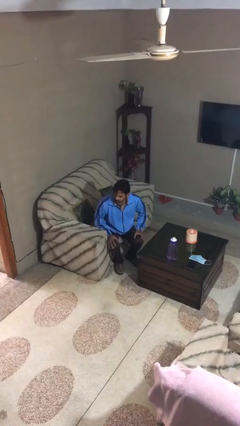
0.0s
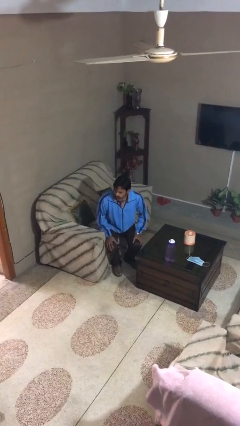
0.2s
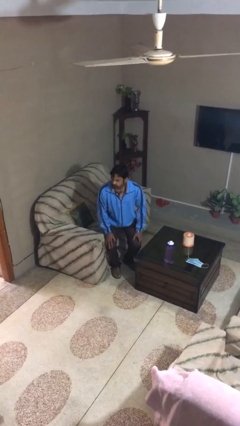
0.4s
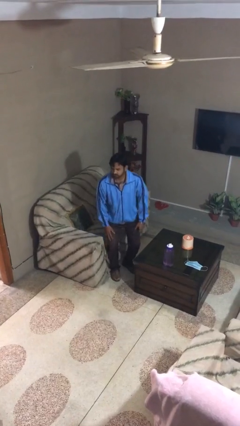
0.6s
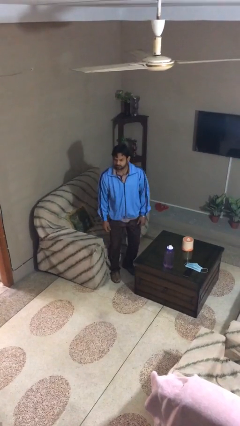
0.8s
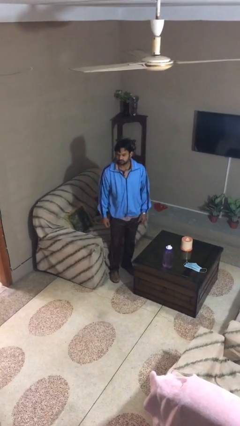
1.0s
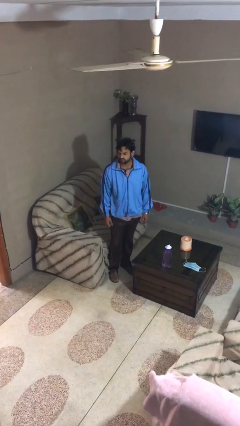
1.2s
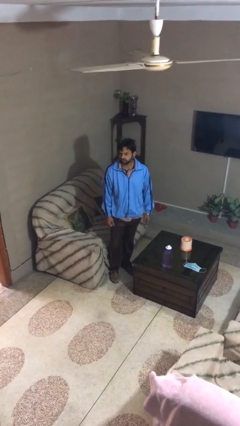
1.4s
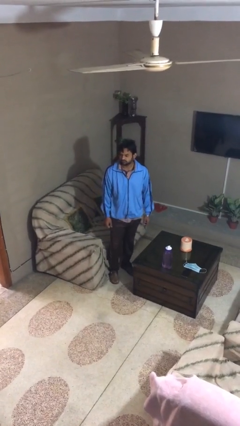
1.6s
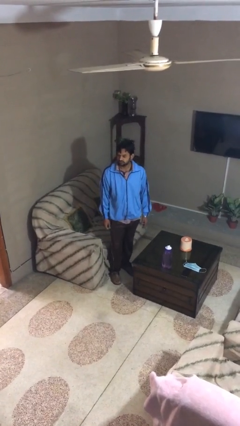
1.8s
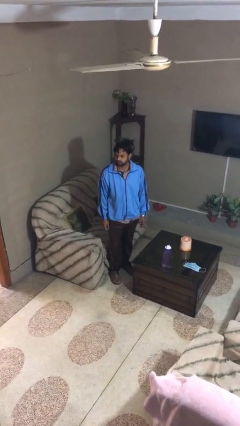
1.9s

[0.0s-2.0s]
person stands up

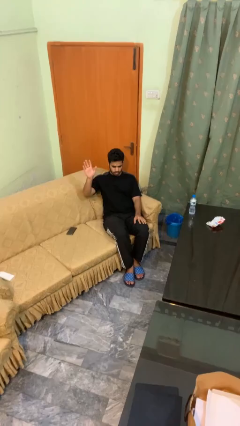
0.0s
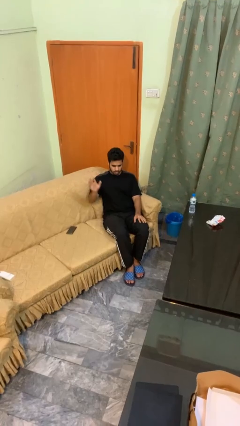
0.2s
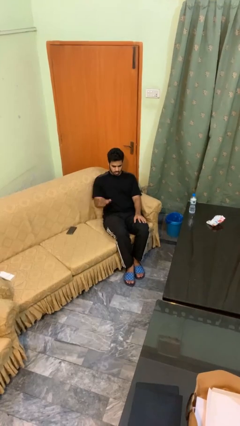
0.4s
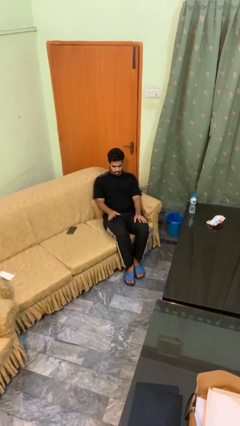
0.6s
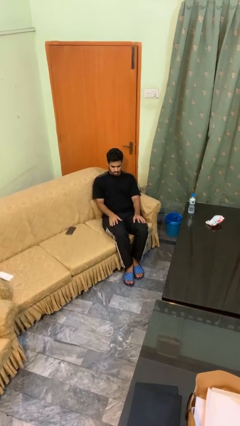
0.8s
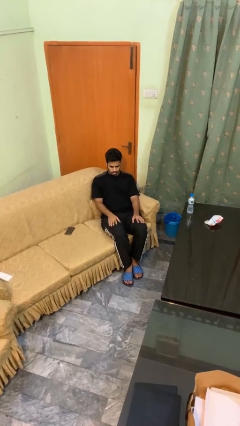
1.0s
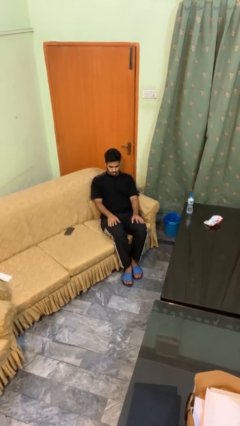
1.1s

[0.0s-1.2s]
person gestures lower hand

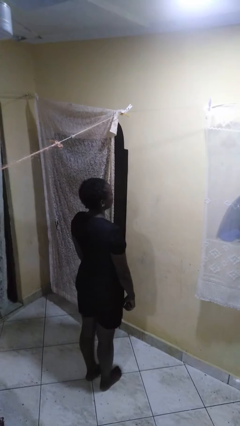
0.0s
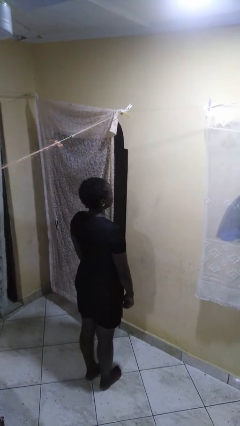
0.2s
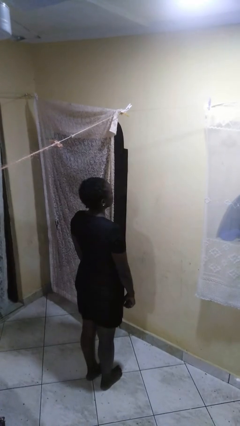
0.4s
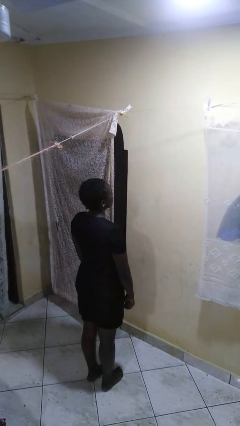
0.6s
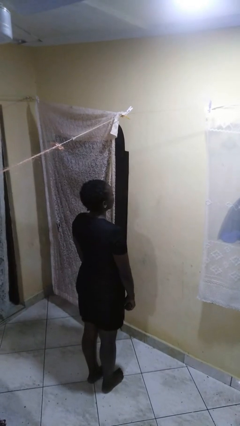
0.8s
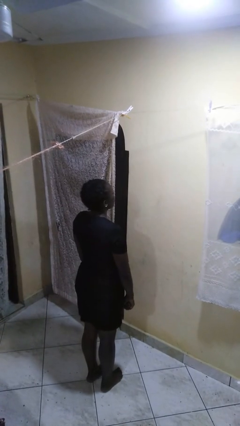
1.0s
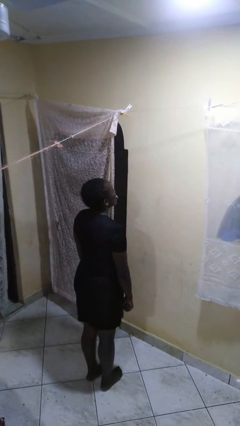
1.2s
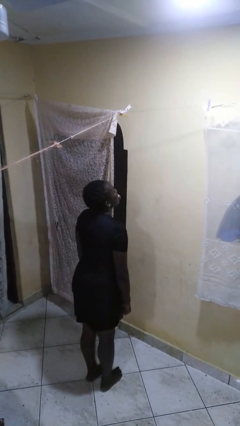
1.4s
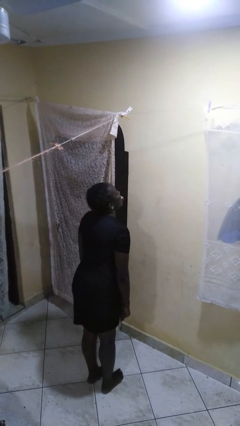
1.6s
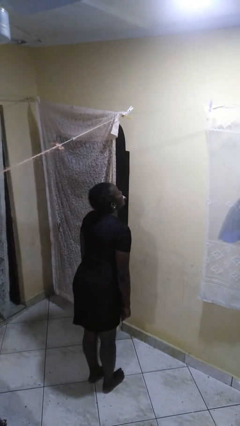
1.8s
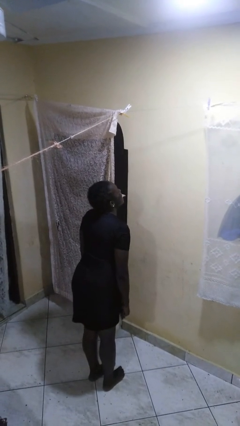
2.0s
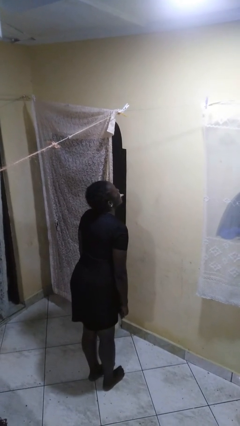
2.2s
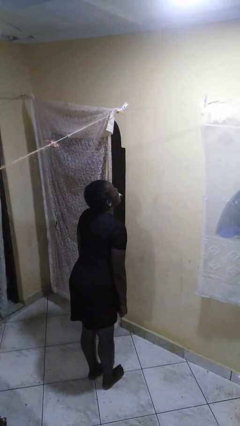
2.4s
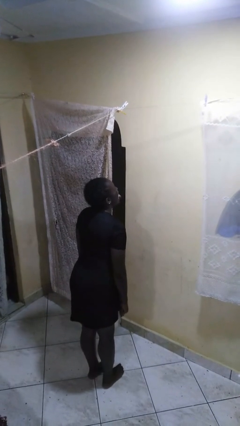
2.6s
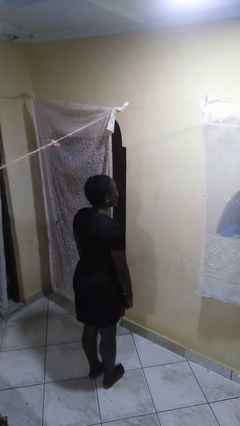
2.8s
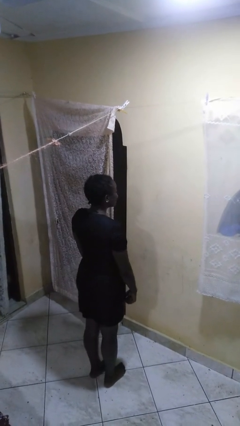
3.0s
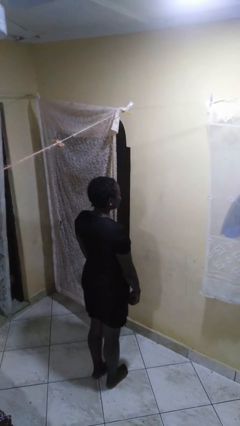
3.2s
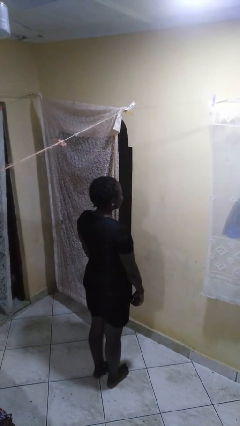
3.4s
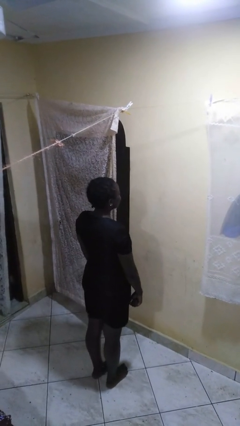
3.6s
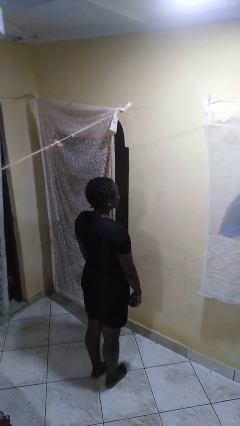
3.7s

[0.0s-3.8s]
person sticks out tongue

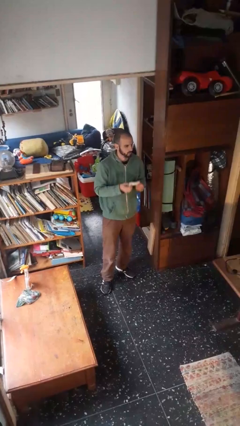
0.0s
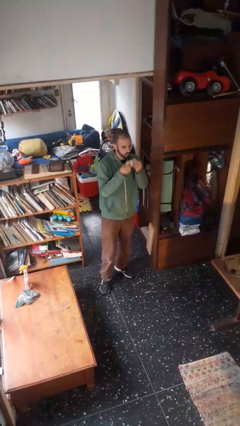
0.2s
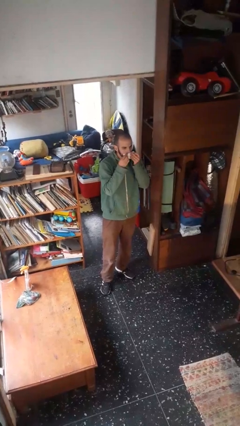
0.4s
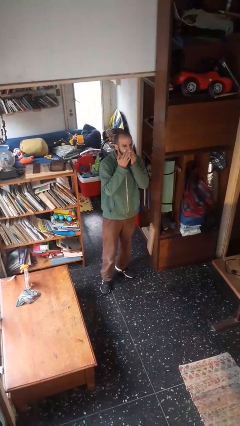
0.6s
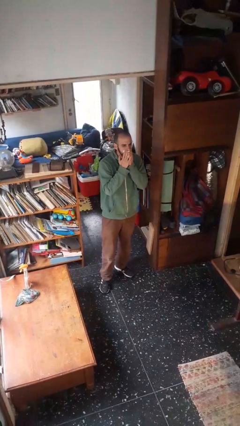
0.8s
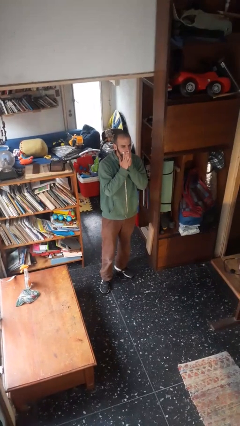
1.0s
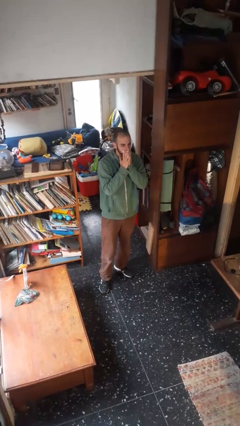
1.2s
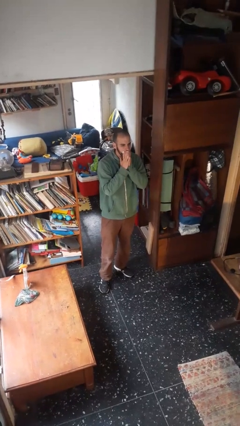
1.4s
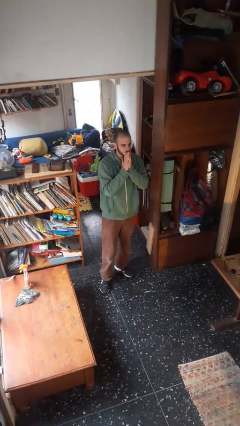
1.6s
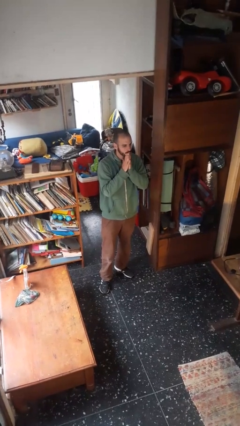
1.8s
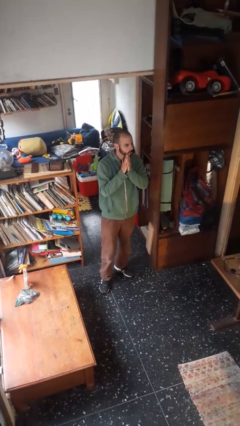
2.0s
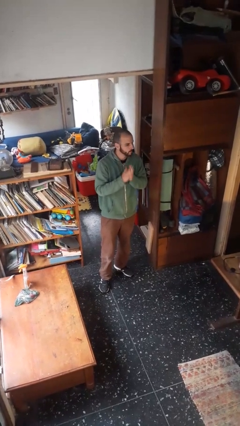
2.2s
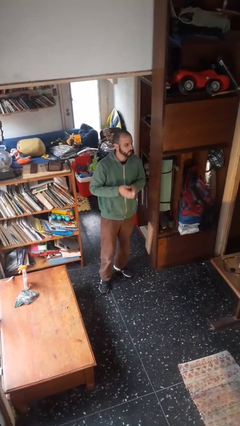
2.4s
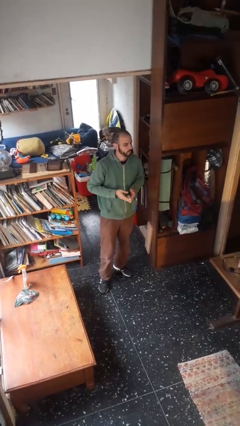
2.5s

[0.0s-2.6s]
person wipes mouth with napkin

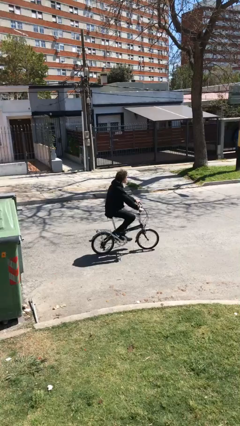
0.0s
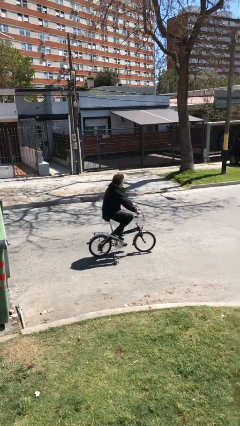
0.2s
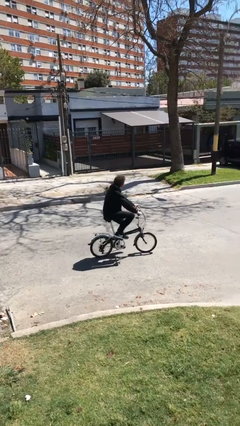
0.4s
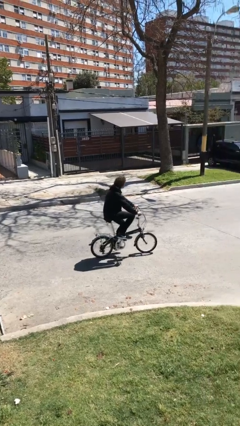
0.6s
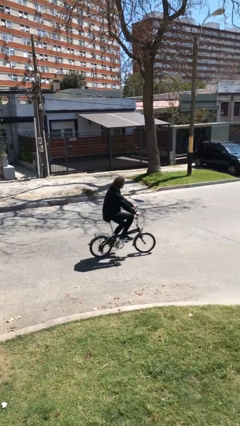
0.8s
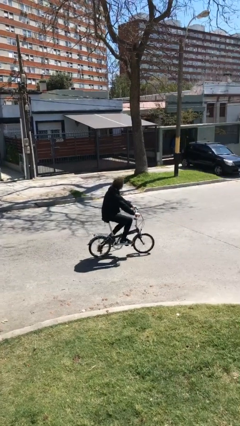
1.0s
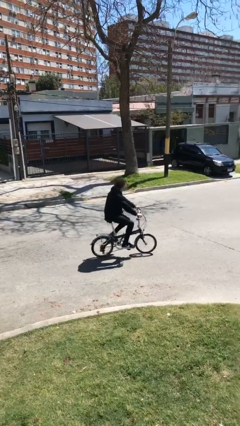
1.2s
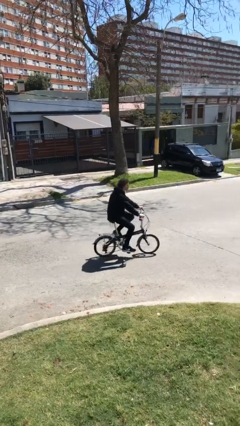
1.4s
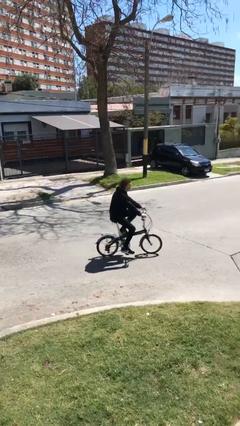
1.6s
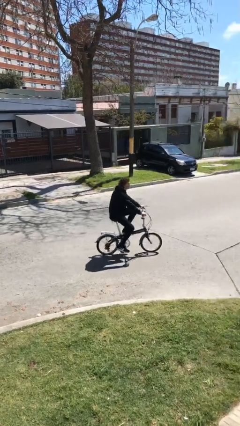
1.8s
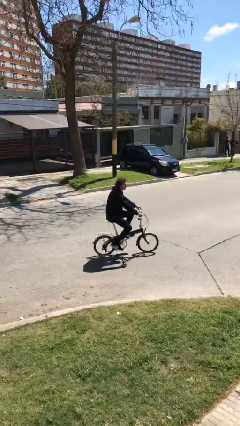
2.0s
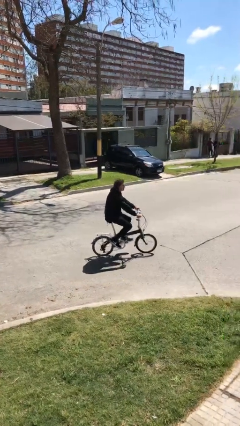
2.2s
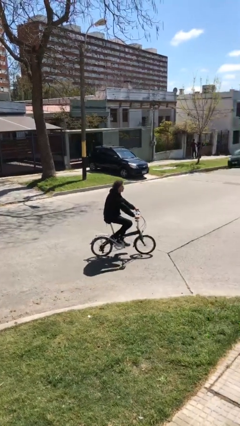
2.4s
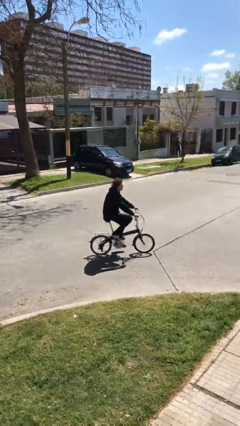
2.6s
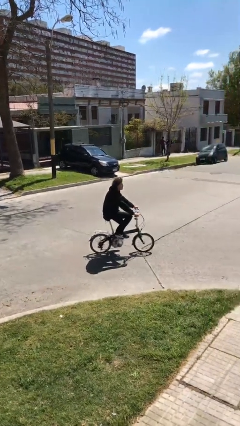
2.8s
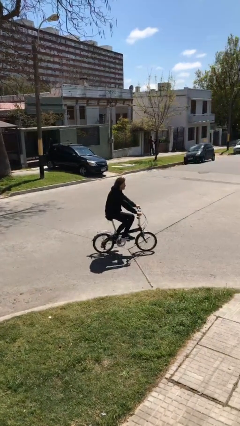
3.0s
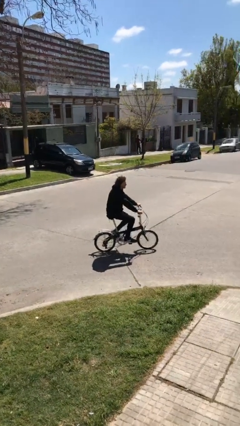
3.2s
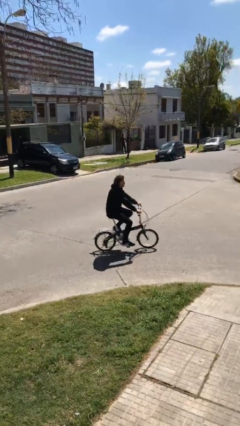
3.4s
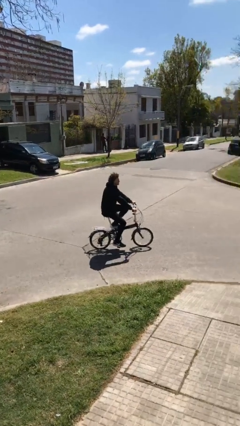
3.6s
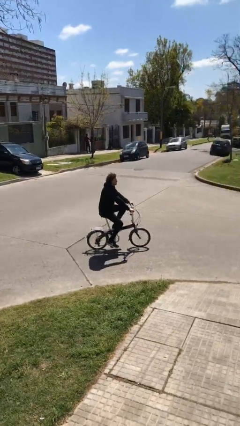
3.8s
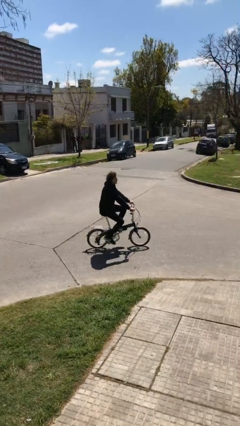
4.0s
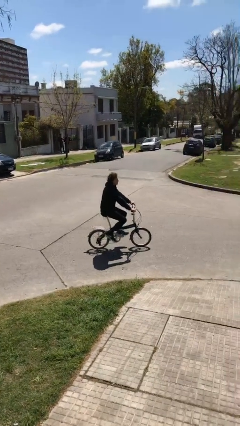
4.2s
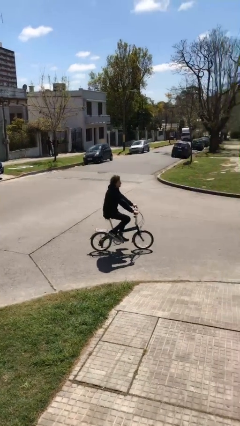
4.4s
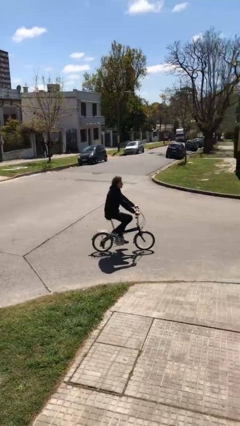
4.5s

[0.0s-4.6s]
person rides bicycle

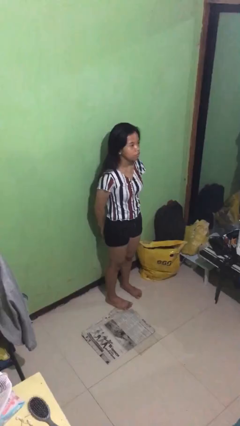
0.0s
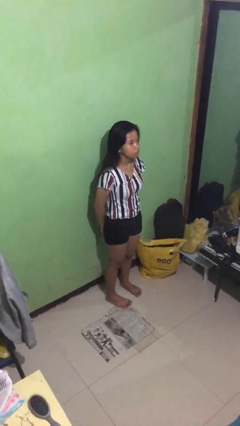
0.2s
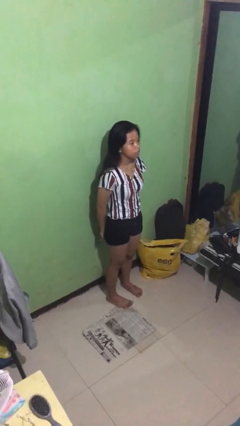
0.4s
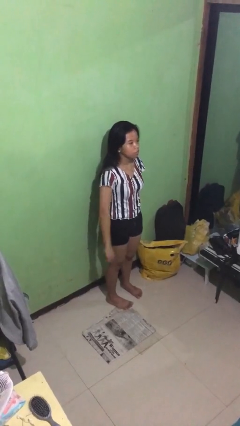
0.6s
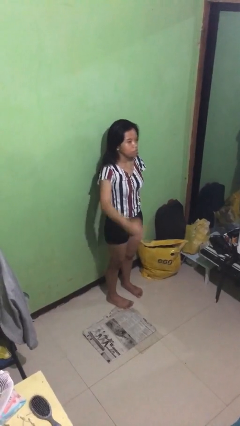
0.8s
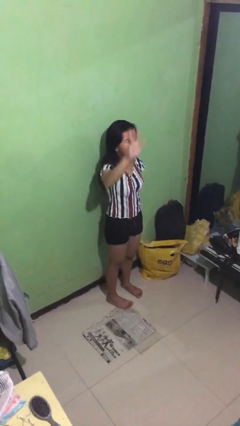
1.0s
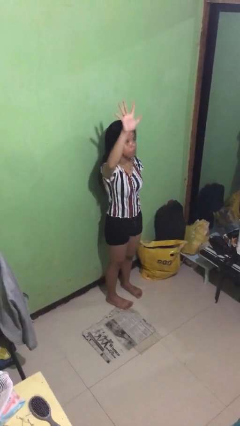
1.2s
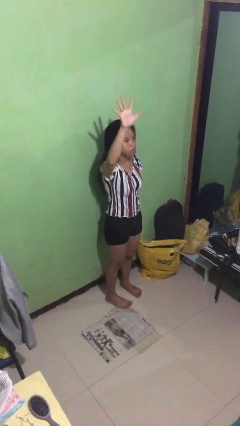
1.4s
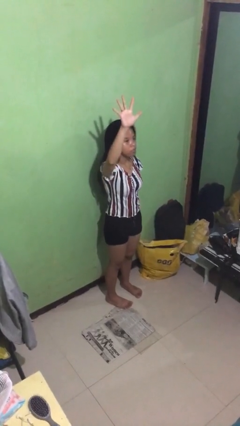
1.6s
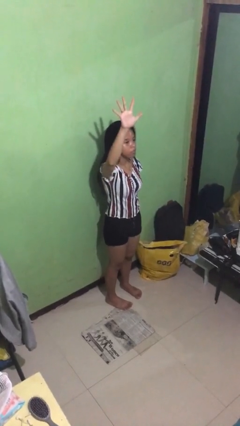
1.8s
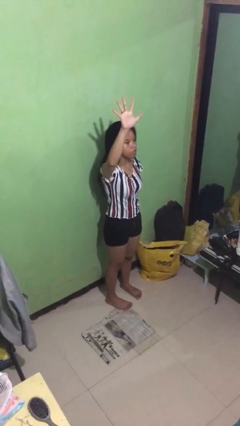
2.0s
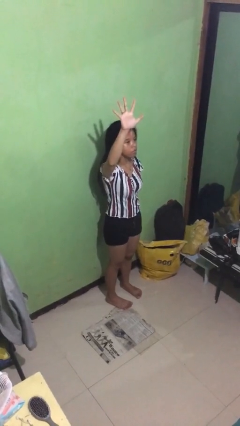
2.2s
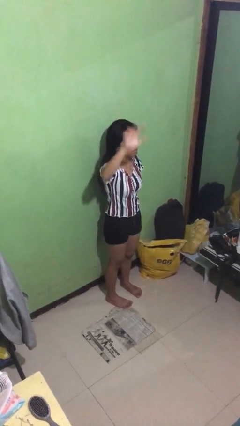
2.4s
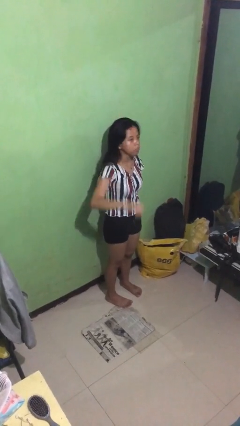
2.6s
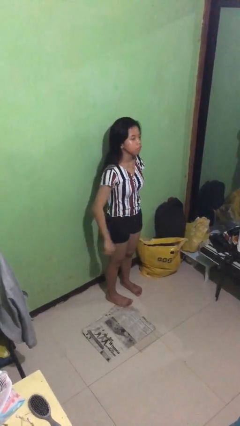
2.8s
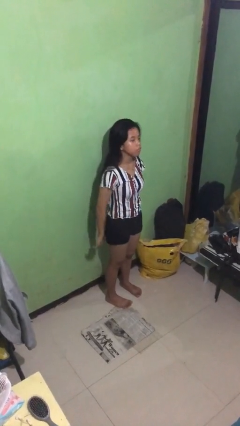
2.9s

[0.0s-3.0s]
person gestures number five

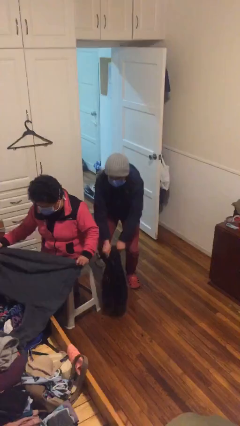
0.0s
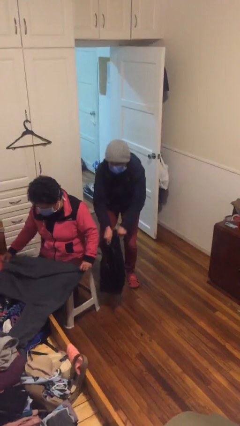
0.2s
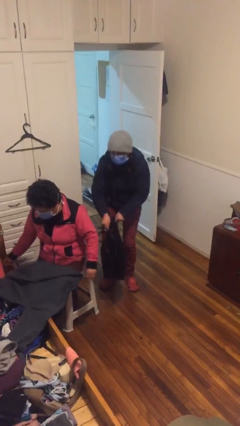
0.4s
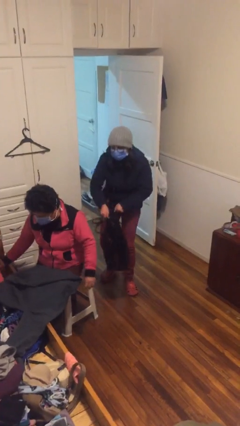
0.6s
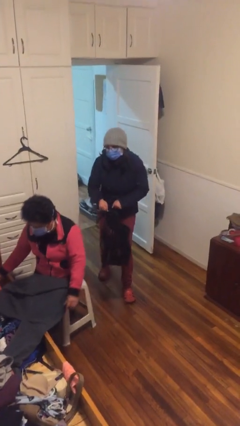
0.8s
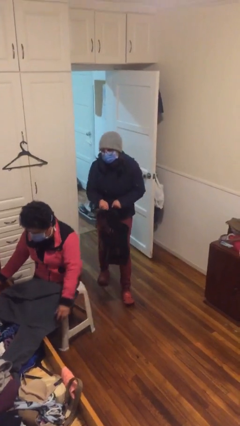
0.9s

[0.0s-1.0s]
person steals object from person
